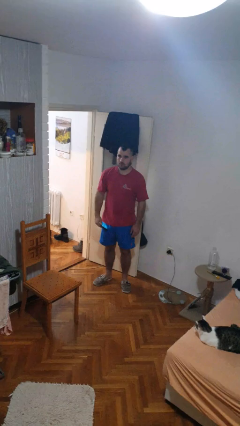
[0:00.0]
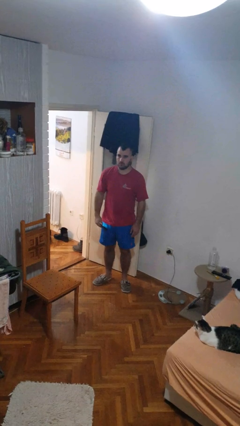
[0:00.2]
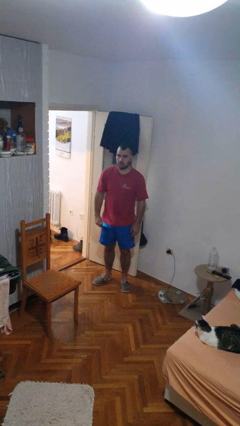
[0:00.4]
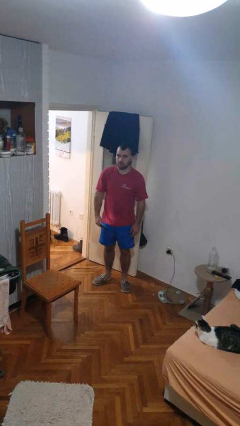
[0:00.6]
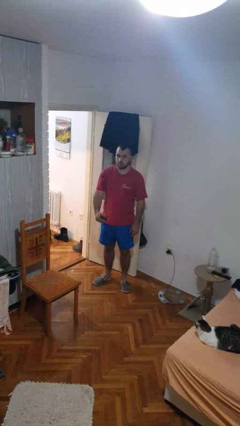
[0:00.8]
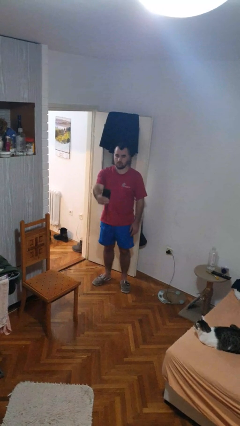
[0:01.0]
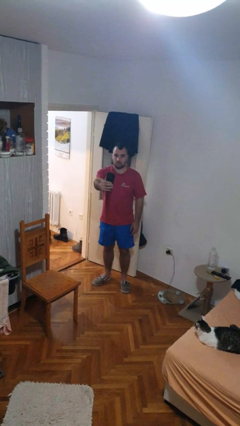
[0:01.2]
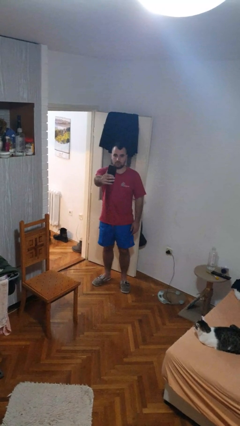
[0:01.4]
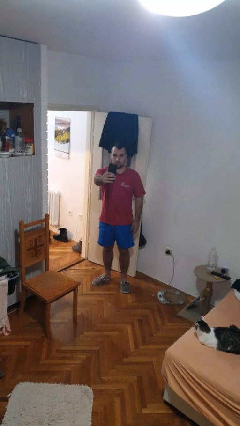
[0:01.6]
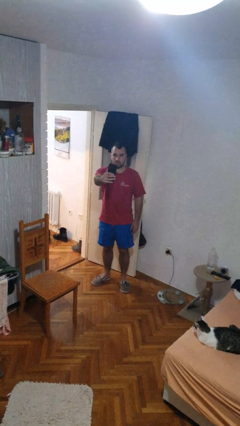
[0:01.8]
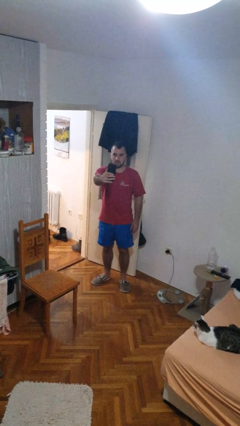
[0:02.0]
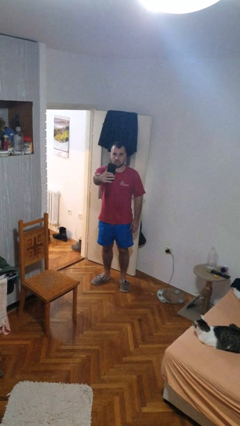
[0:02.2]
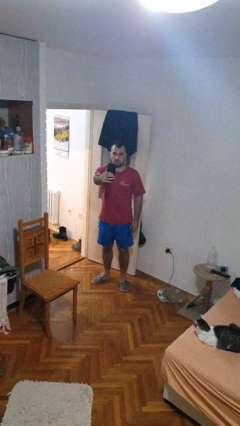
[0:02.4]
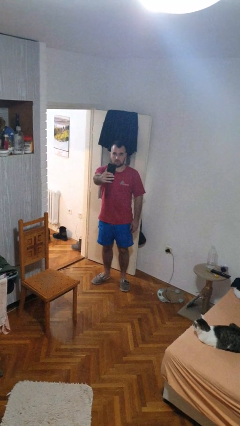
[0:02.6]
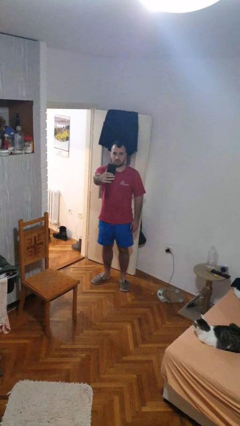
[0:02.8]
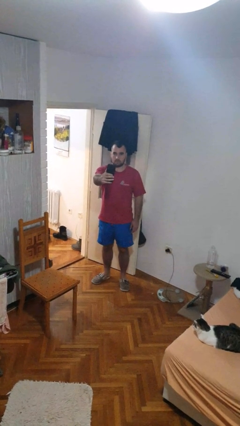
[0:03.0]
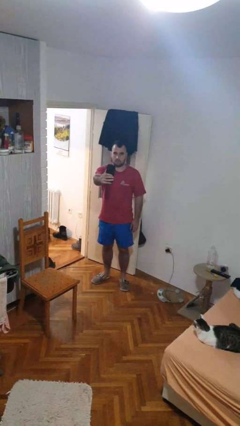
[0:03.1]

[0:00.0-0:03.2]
person takes selfie

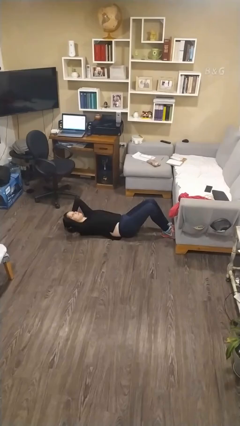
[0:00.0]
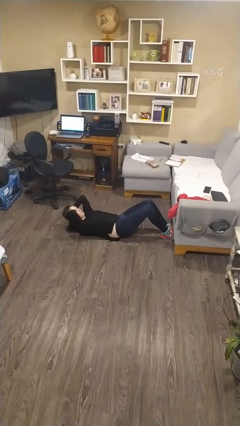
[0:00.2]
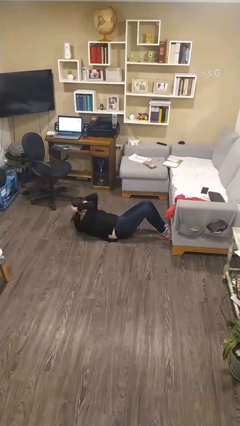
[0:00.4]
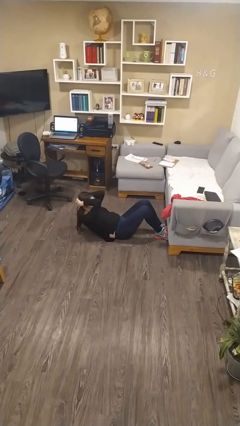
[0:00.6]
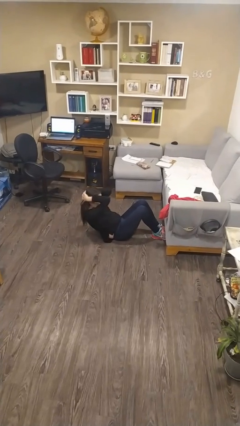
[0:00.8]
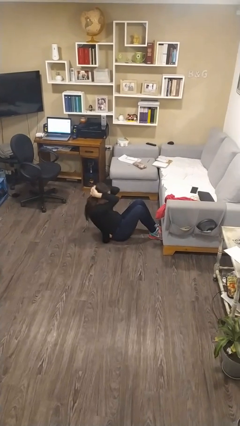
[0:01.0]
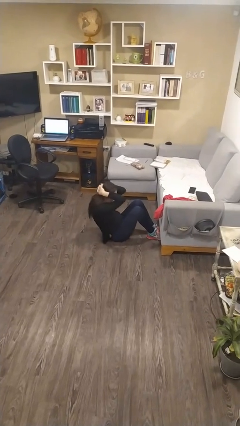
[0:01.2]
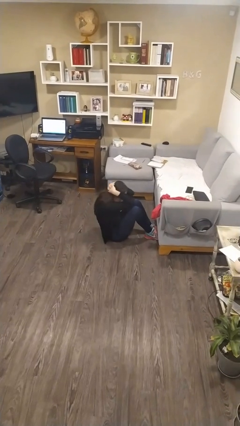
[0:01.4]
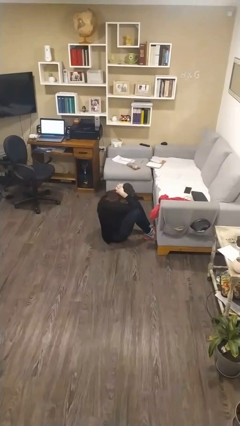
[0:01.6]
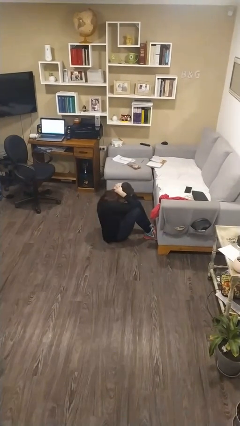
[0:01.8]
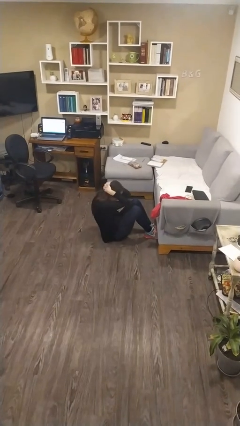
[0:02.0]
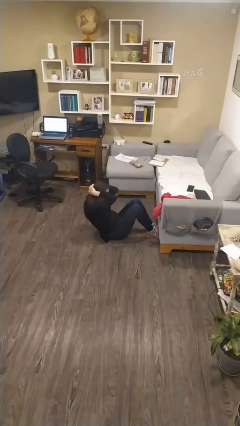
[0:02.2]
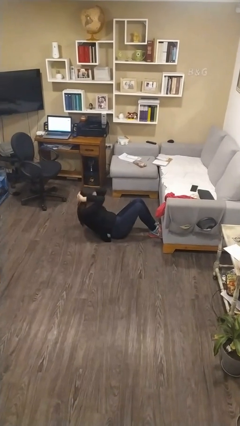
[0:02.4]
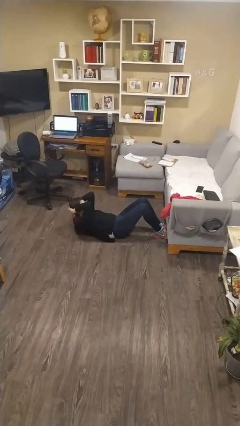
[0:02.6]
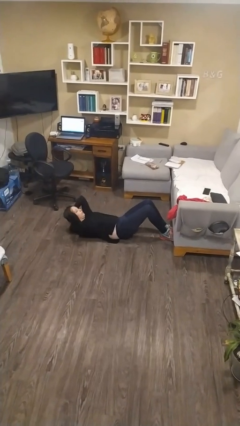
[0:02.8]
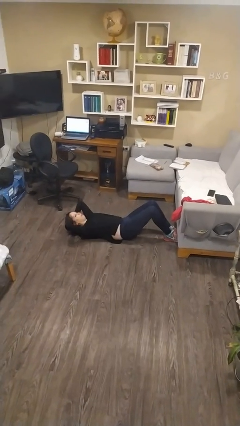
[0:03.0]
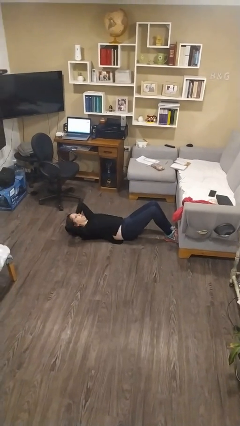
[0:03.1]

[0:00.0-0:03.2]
person exercises with situp

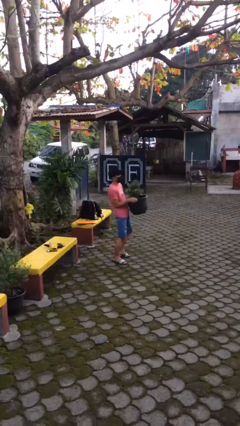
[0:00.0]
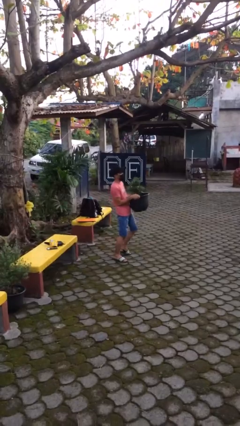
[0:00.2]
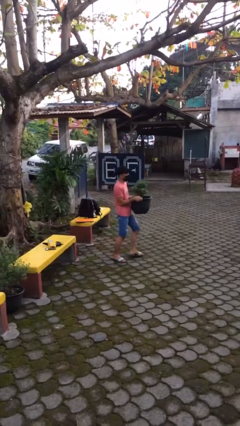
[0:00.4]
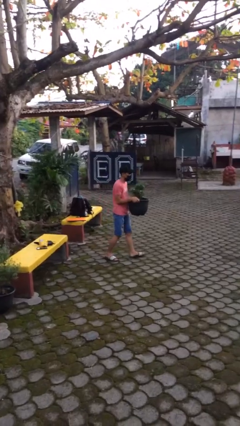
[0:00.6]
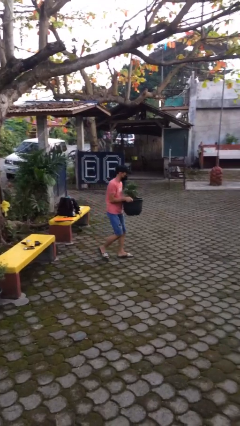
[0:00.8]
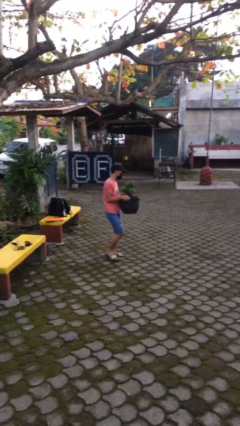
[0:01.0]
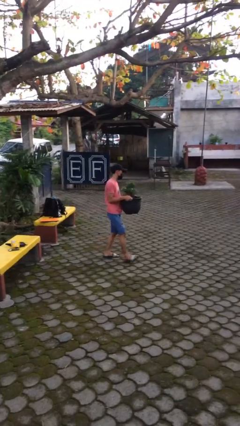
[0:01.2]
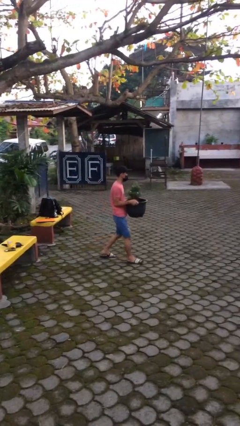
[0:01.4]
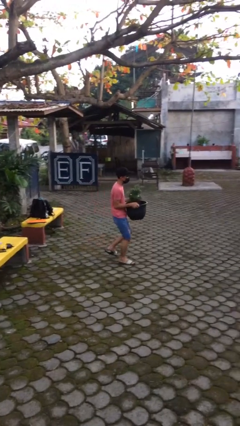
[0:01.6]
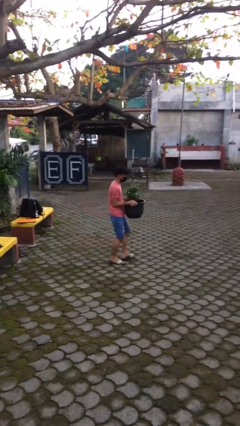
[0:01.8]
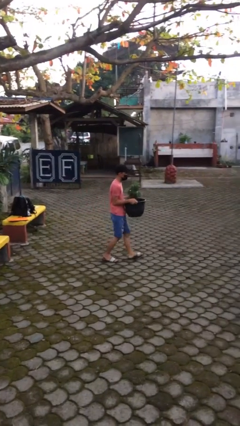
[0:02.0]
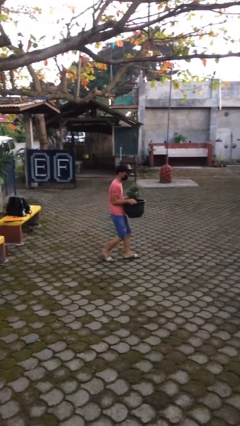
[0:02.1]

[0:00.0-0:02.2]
person carries heavy object

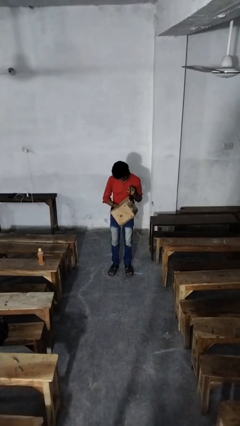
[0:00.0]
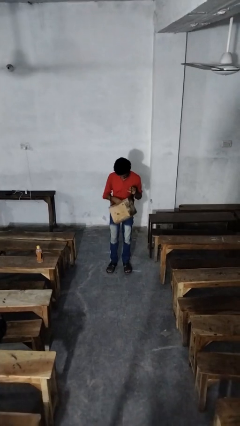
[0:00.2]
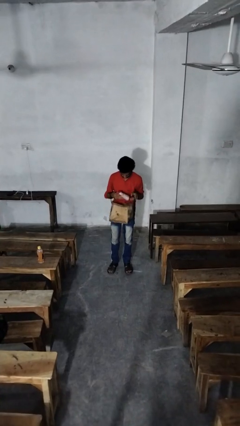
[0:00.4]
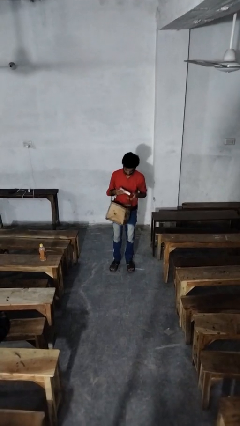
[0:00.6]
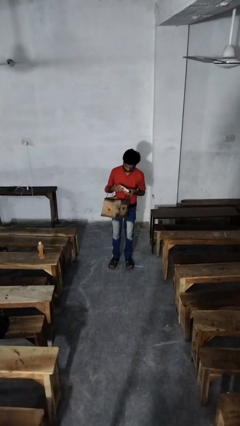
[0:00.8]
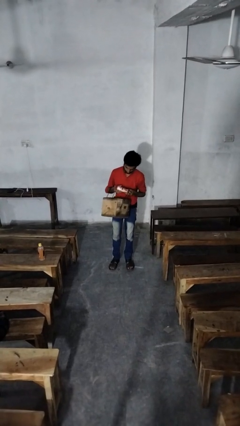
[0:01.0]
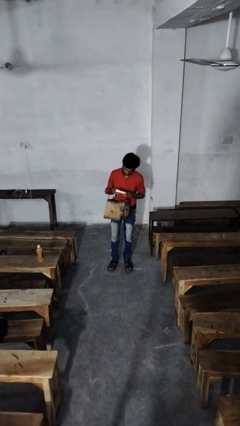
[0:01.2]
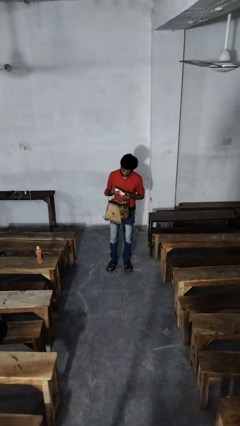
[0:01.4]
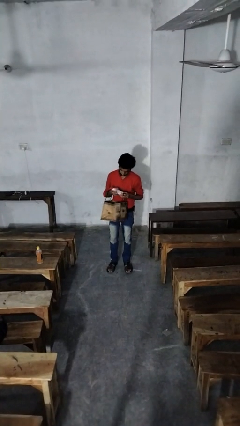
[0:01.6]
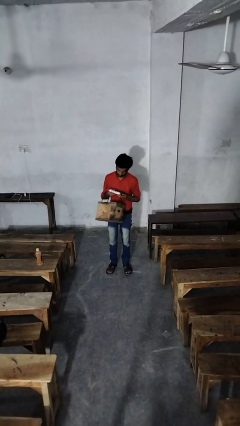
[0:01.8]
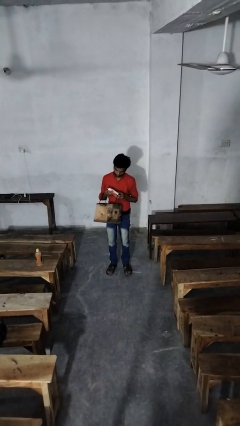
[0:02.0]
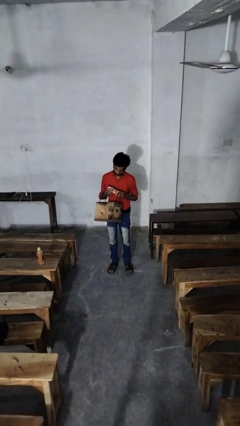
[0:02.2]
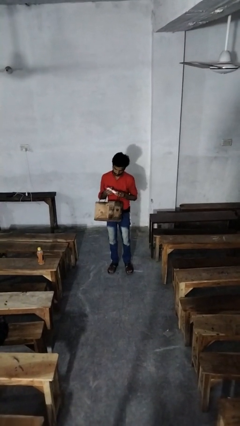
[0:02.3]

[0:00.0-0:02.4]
person takes object from purse

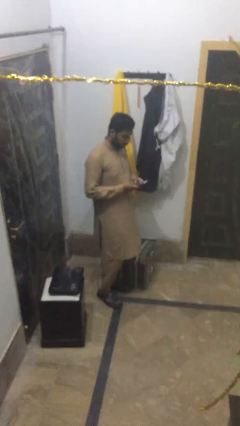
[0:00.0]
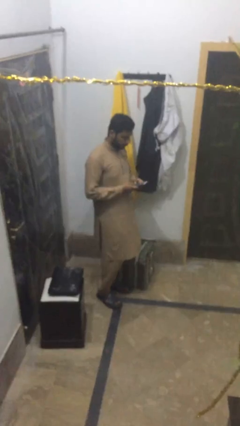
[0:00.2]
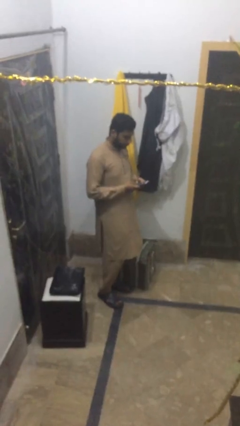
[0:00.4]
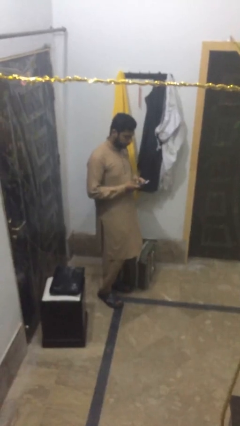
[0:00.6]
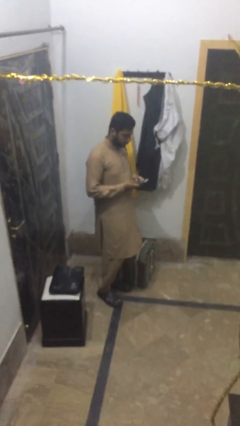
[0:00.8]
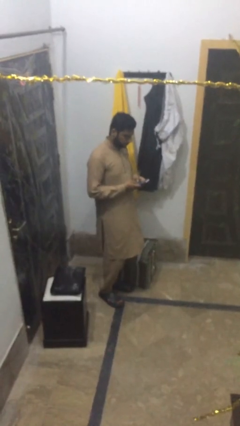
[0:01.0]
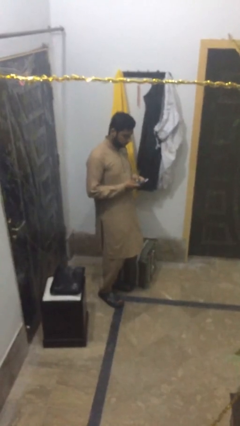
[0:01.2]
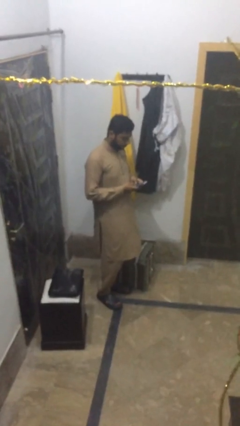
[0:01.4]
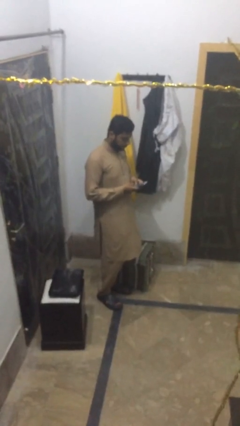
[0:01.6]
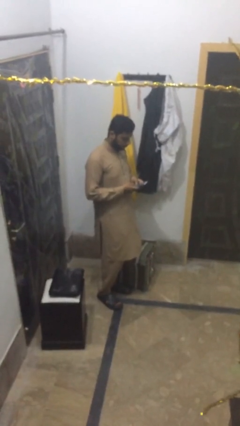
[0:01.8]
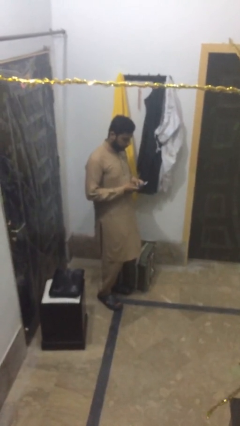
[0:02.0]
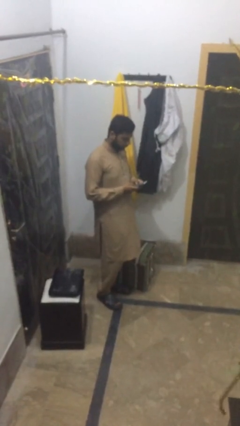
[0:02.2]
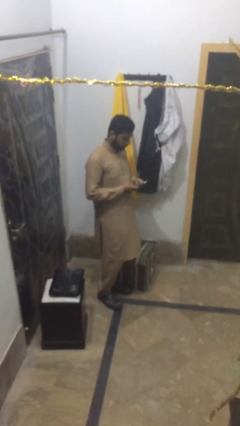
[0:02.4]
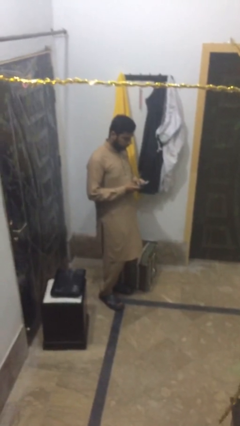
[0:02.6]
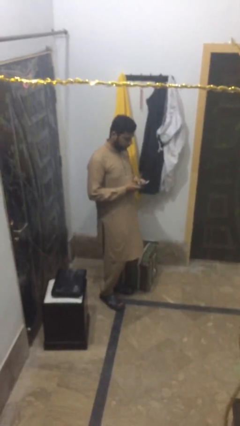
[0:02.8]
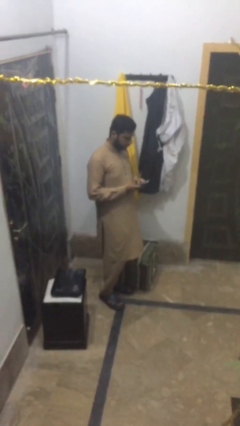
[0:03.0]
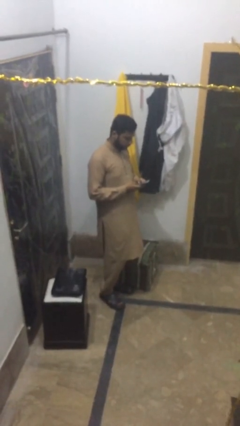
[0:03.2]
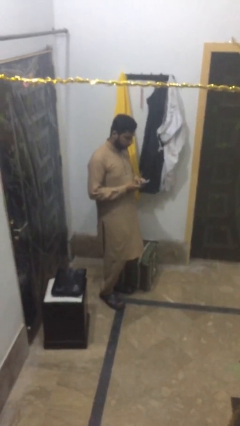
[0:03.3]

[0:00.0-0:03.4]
person texts on phone

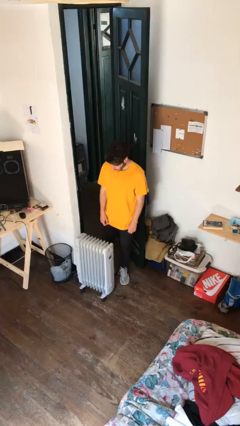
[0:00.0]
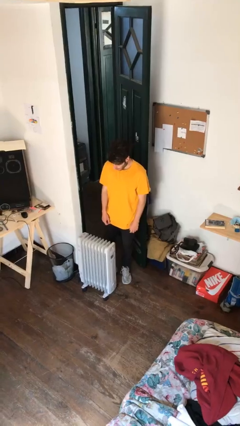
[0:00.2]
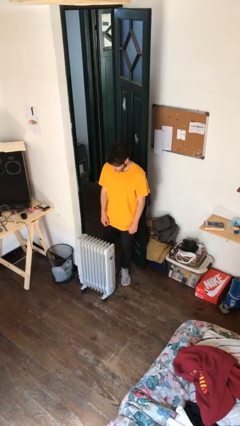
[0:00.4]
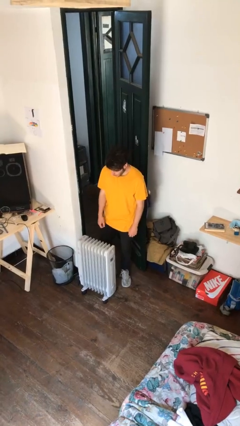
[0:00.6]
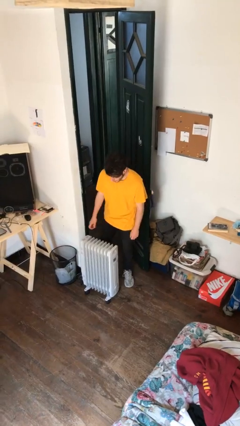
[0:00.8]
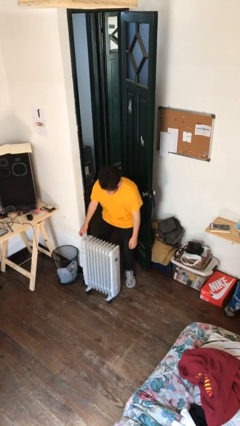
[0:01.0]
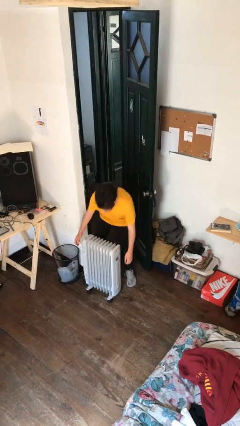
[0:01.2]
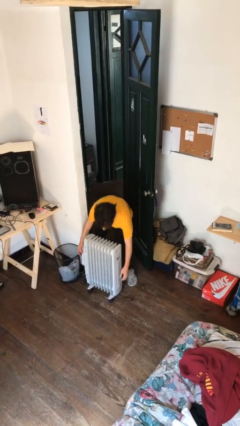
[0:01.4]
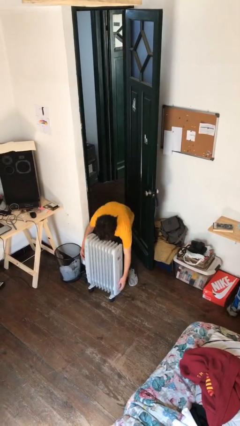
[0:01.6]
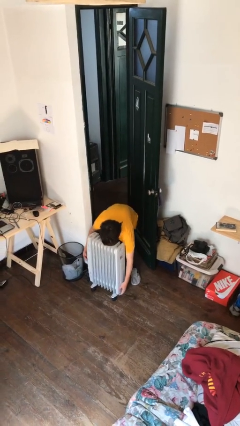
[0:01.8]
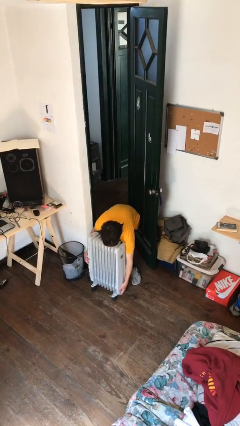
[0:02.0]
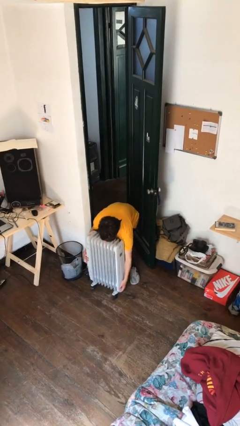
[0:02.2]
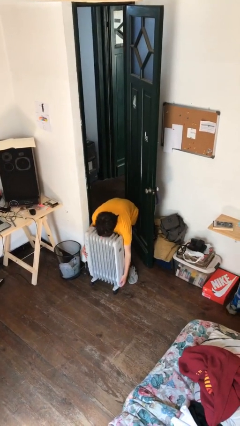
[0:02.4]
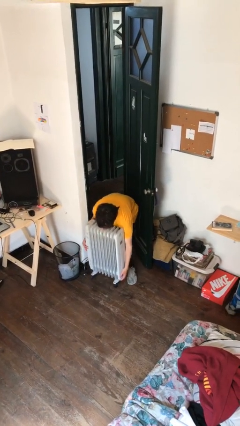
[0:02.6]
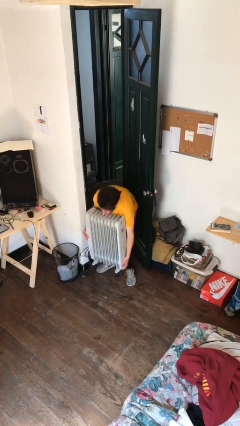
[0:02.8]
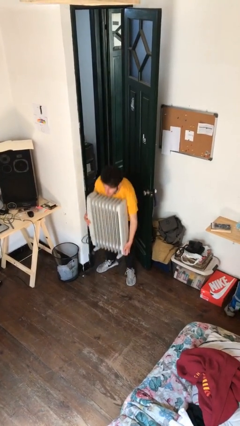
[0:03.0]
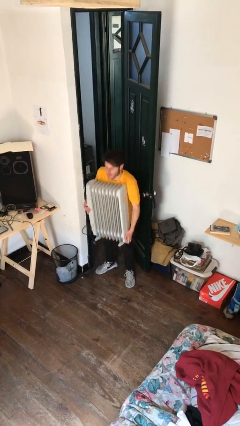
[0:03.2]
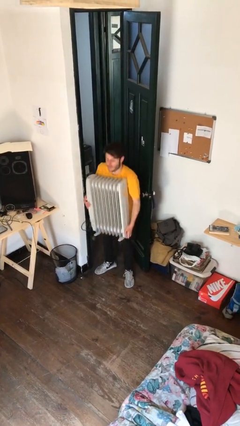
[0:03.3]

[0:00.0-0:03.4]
person picks up object from floor
